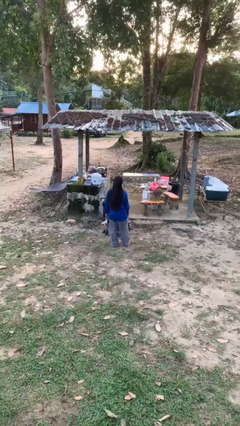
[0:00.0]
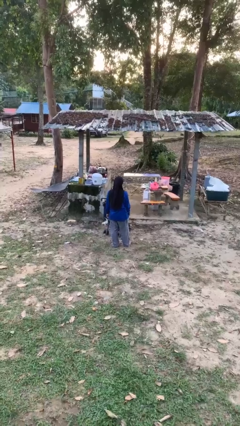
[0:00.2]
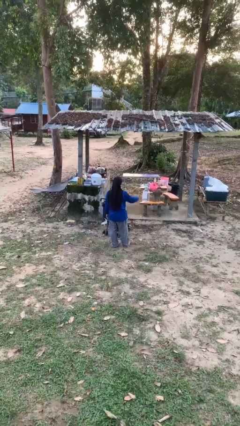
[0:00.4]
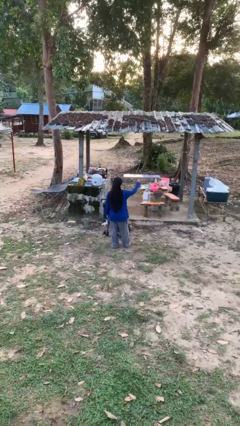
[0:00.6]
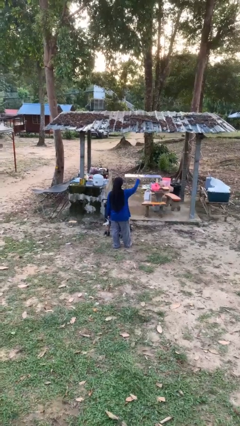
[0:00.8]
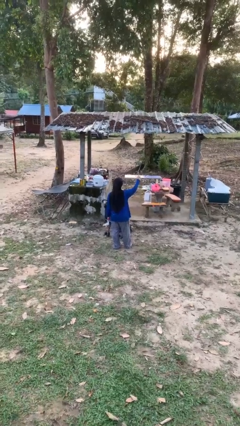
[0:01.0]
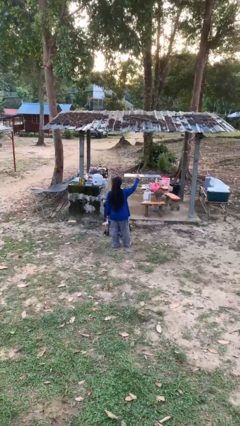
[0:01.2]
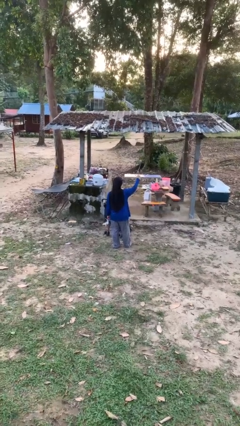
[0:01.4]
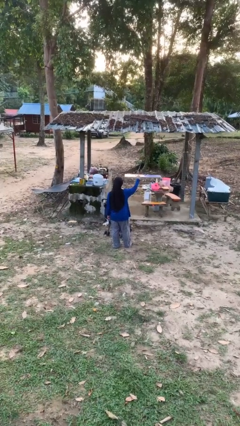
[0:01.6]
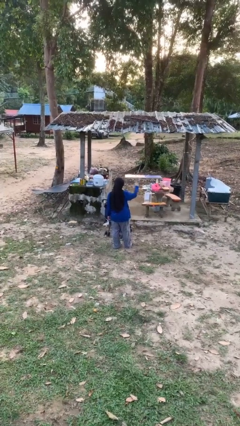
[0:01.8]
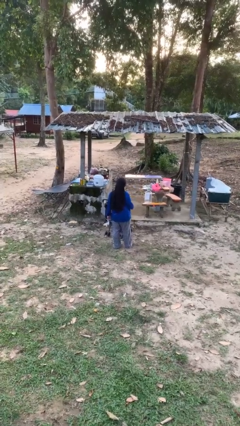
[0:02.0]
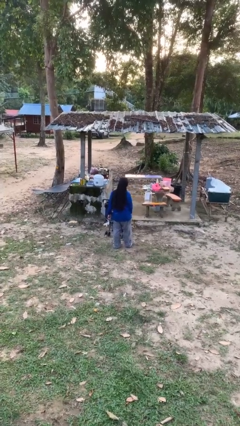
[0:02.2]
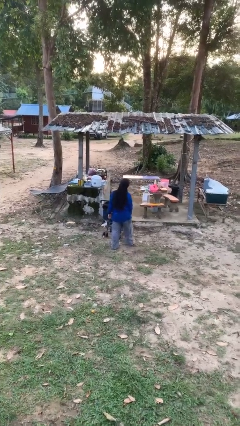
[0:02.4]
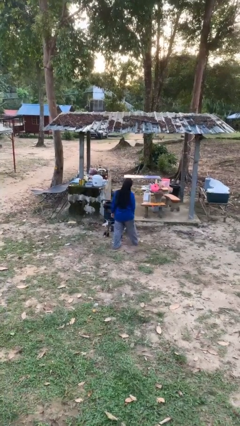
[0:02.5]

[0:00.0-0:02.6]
person gestures number one

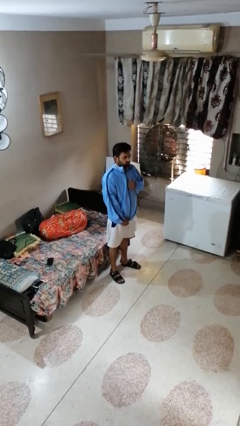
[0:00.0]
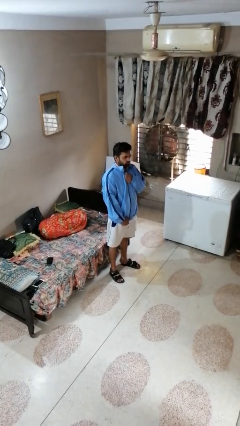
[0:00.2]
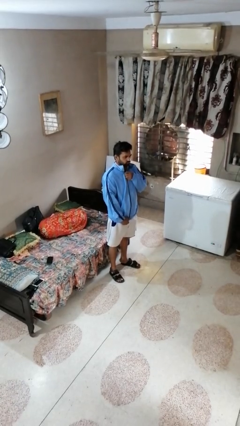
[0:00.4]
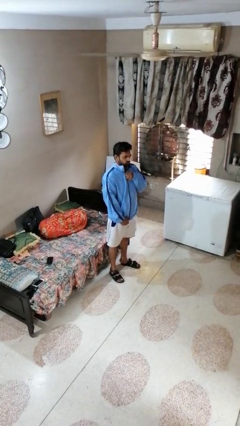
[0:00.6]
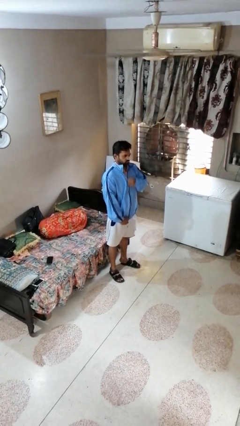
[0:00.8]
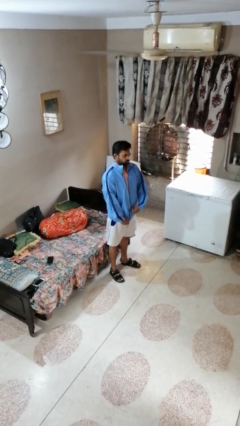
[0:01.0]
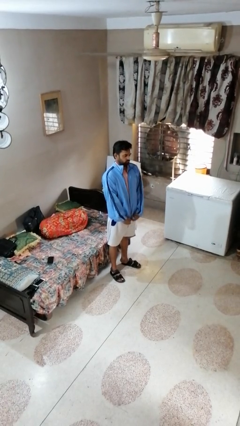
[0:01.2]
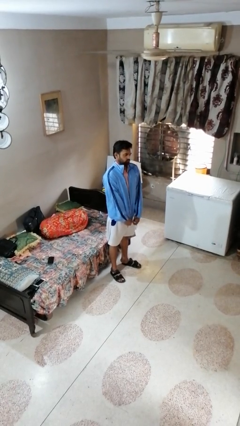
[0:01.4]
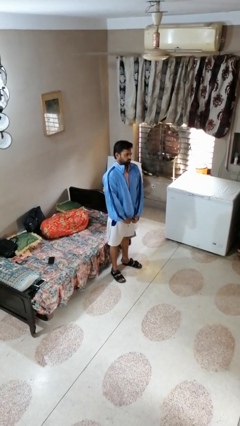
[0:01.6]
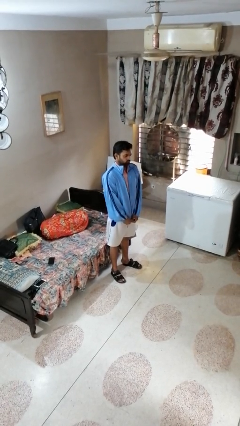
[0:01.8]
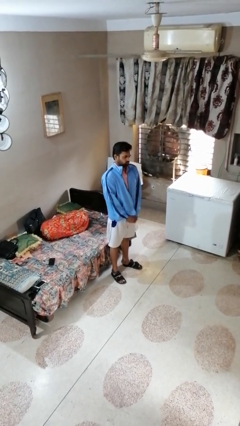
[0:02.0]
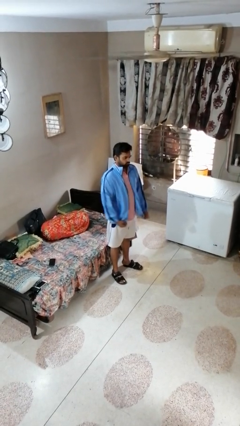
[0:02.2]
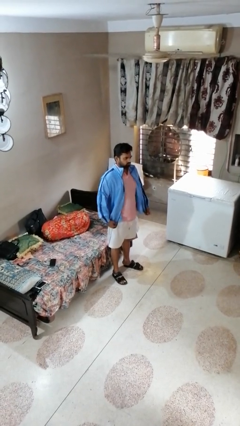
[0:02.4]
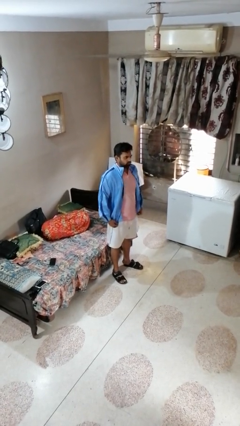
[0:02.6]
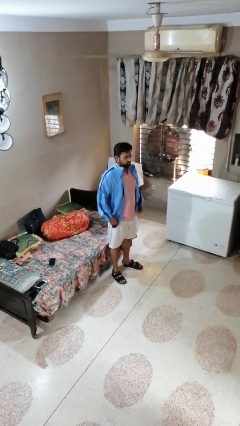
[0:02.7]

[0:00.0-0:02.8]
person unzips jacket

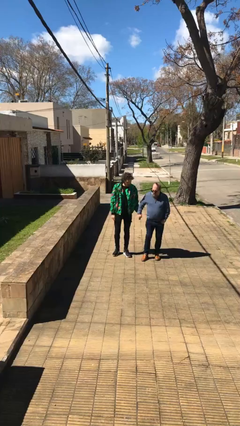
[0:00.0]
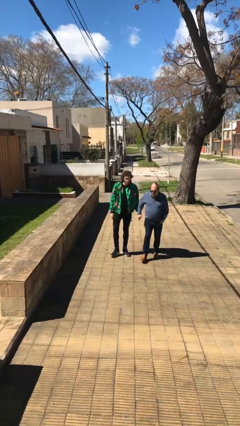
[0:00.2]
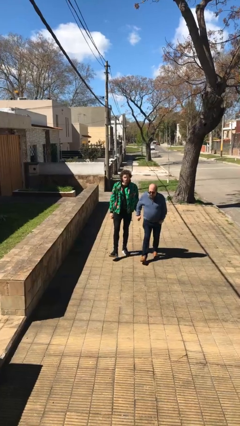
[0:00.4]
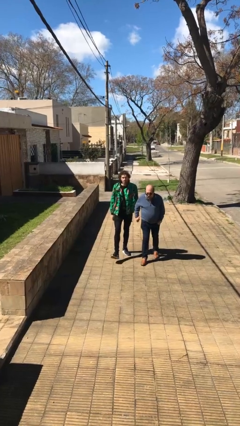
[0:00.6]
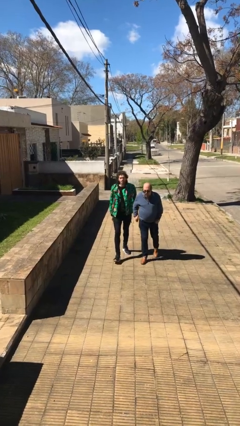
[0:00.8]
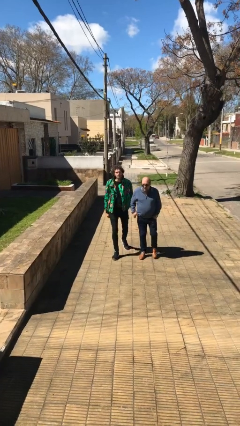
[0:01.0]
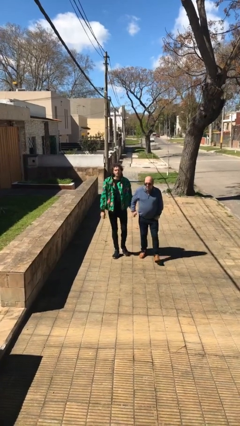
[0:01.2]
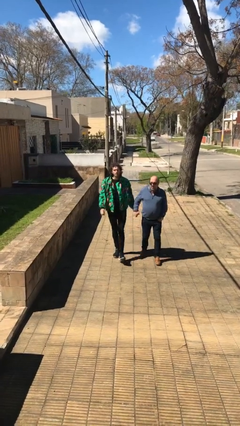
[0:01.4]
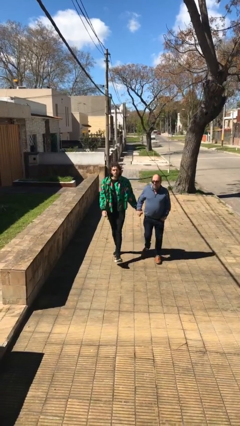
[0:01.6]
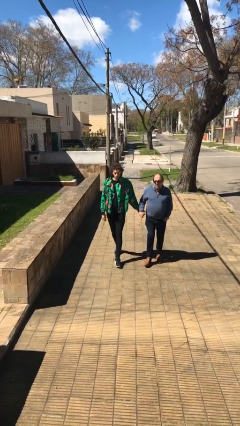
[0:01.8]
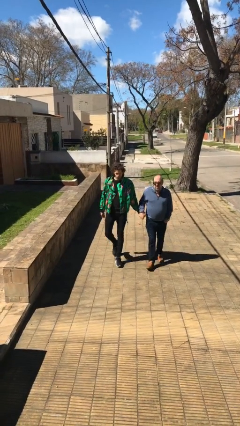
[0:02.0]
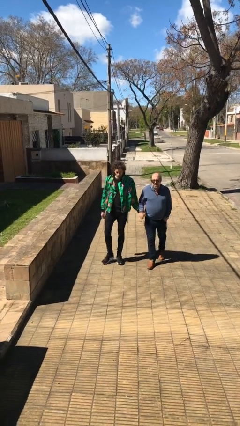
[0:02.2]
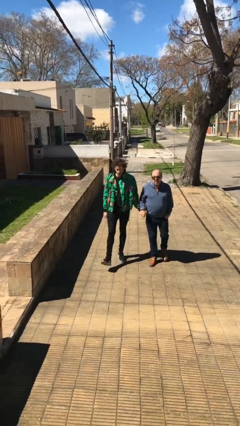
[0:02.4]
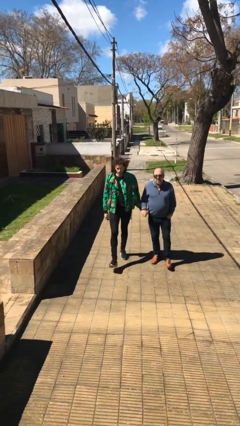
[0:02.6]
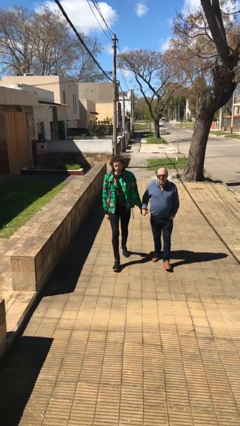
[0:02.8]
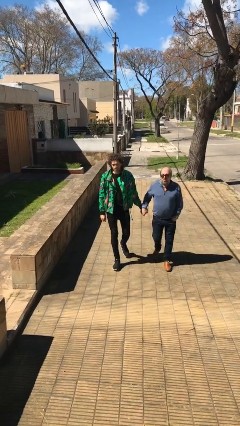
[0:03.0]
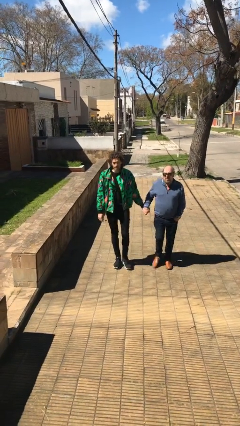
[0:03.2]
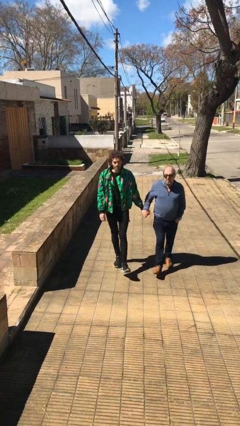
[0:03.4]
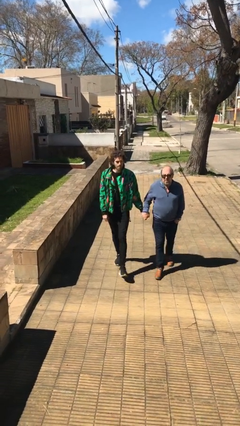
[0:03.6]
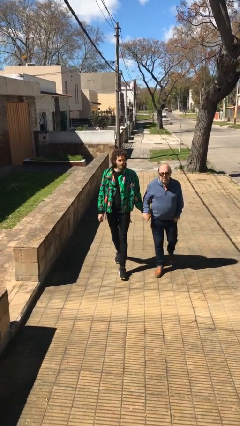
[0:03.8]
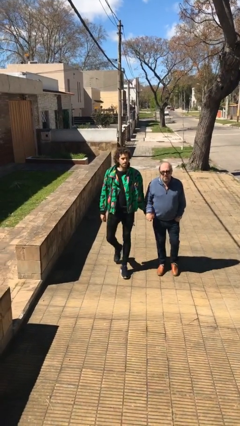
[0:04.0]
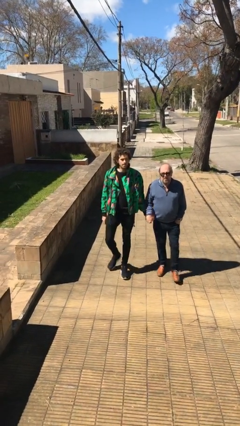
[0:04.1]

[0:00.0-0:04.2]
person holds hand

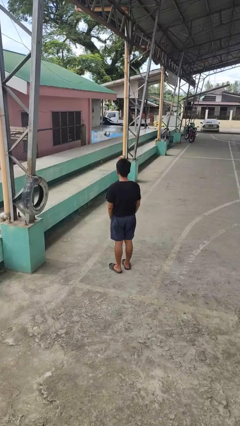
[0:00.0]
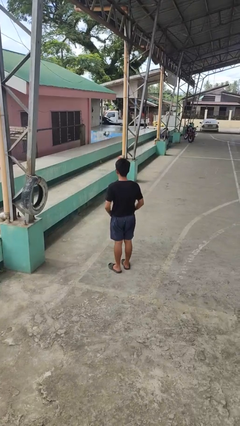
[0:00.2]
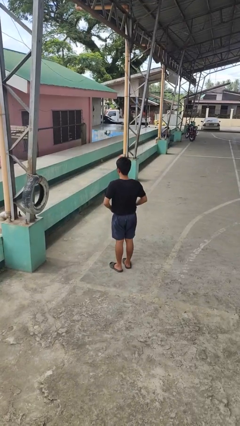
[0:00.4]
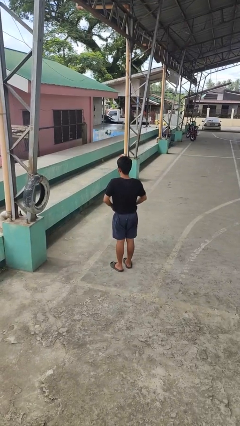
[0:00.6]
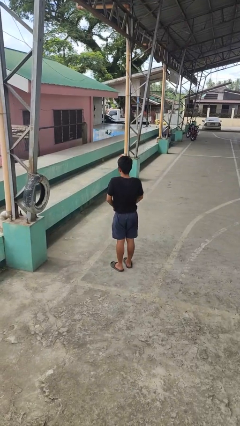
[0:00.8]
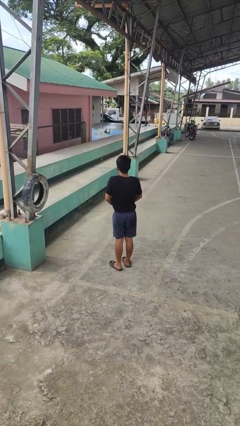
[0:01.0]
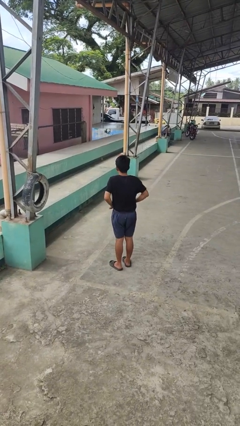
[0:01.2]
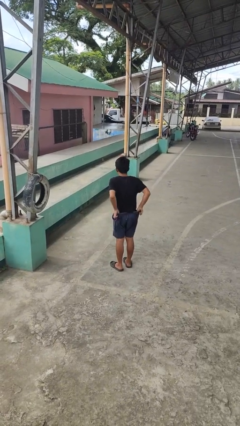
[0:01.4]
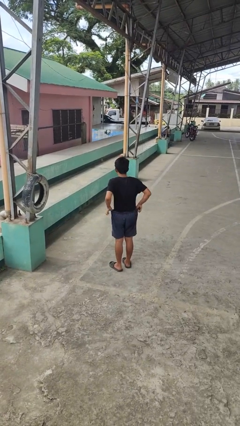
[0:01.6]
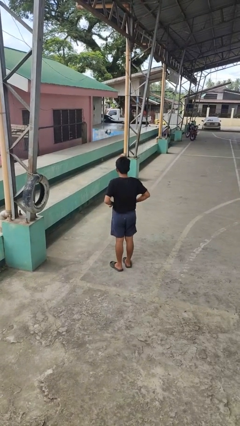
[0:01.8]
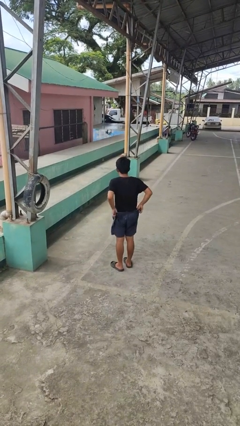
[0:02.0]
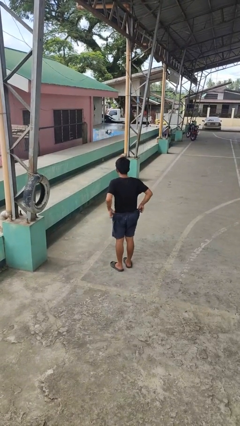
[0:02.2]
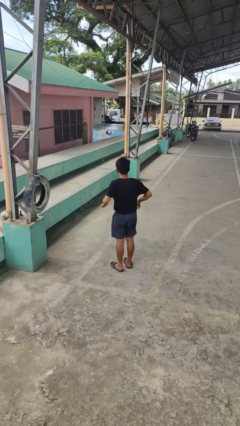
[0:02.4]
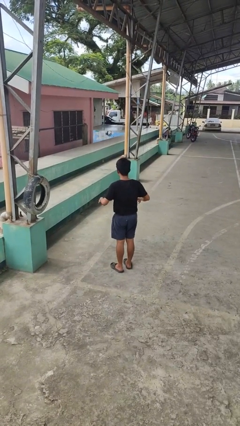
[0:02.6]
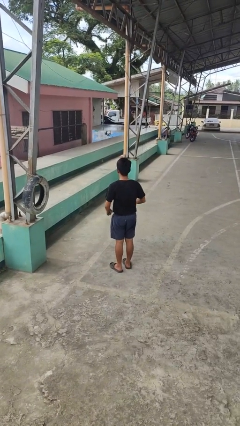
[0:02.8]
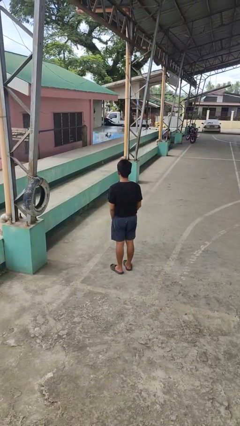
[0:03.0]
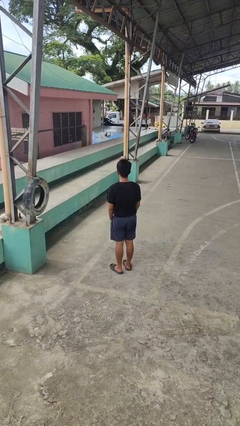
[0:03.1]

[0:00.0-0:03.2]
person hikes up pants

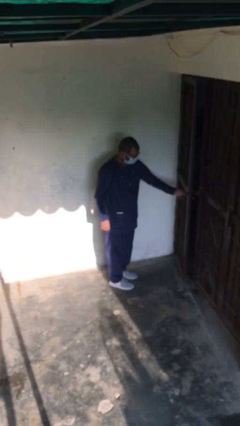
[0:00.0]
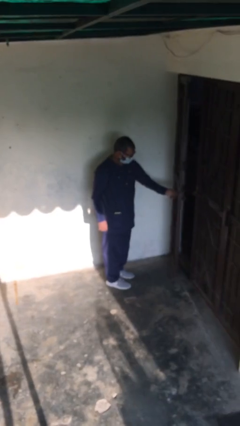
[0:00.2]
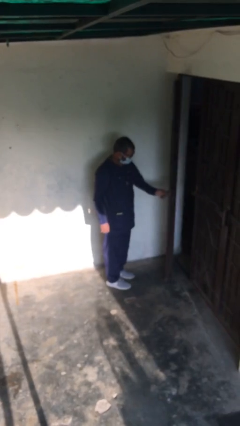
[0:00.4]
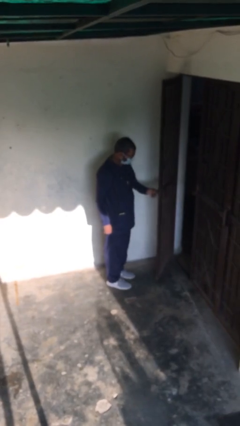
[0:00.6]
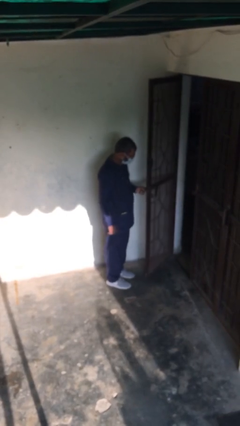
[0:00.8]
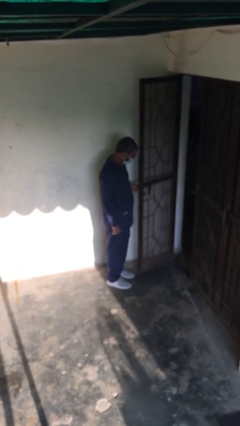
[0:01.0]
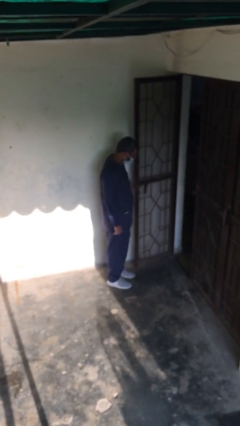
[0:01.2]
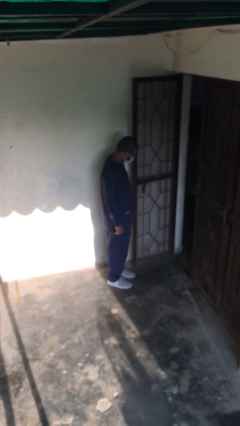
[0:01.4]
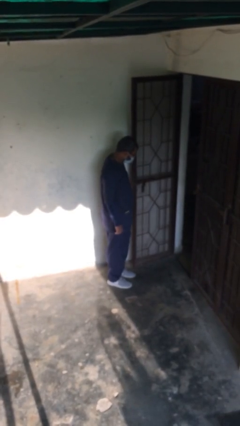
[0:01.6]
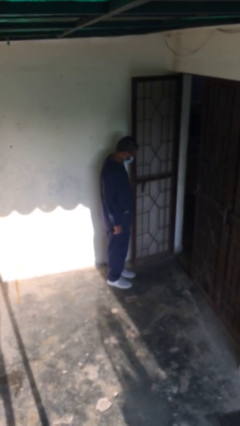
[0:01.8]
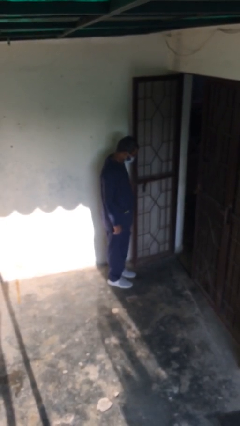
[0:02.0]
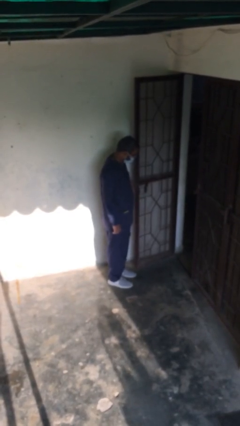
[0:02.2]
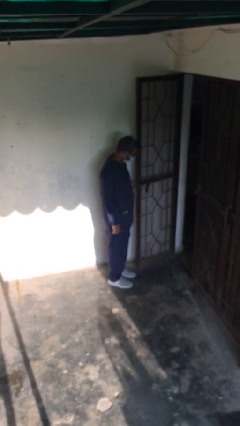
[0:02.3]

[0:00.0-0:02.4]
person opens facility door

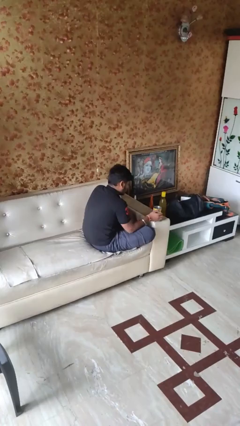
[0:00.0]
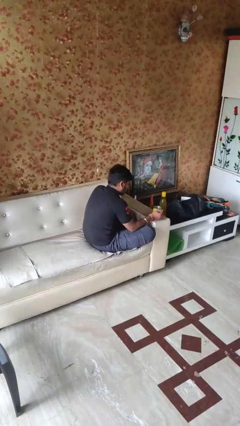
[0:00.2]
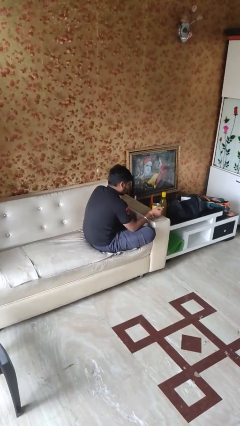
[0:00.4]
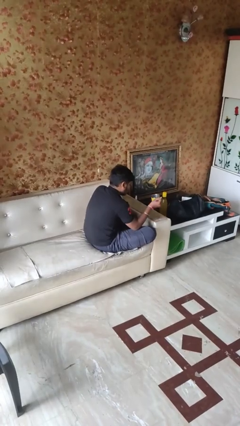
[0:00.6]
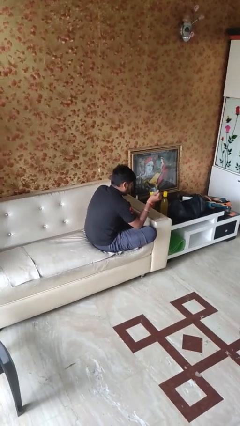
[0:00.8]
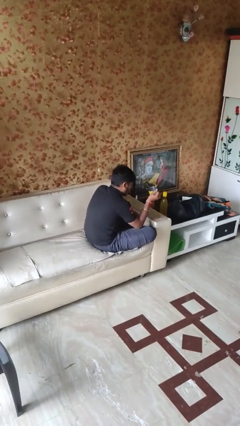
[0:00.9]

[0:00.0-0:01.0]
person picks up object from table

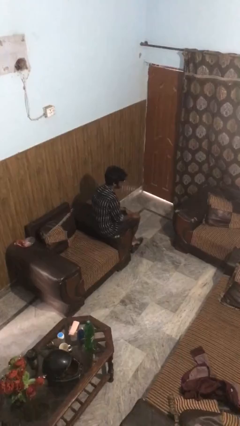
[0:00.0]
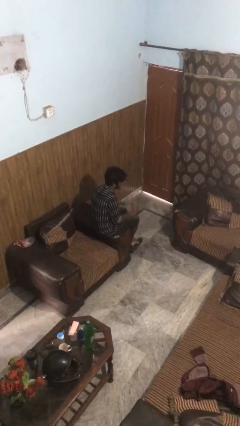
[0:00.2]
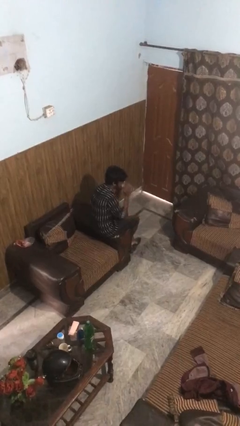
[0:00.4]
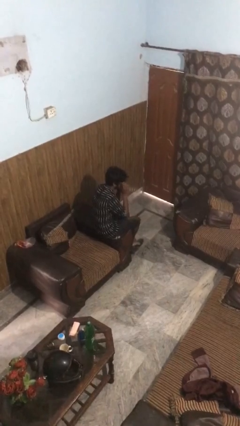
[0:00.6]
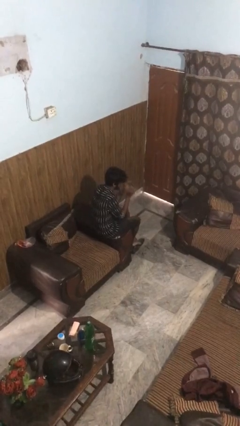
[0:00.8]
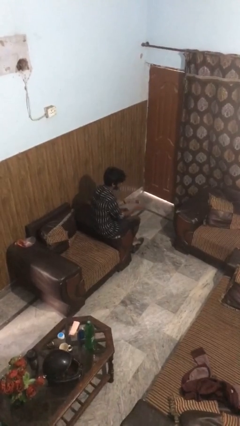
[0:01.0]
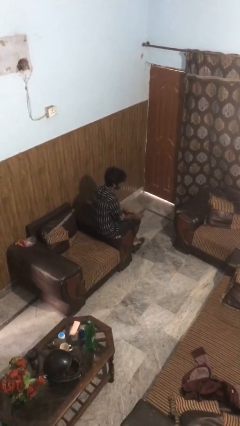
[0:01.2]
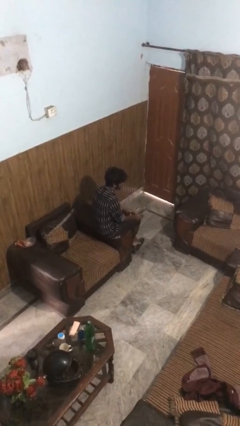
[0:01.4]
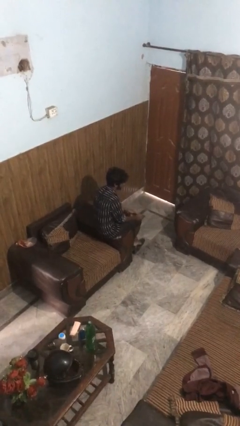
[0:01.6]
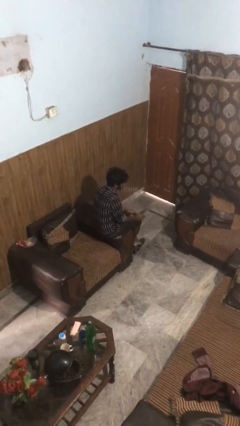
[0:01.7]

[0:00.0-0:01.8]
person takes off sunglasses
